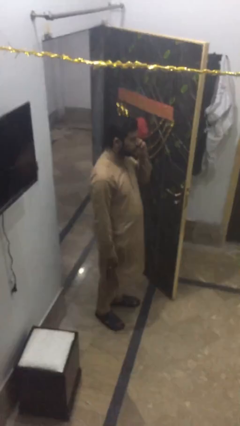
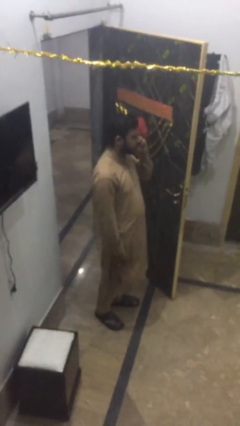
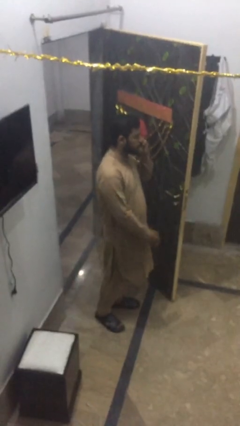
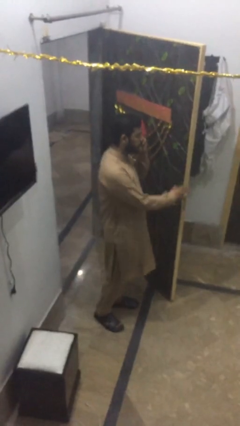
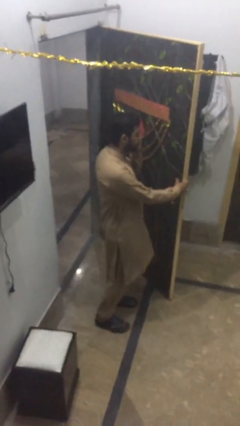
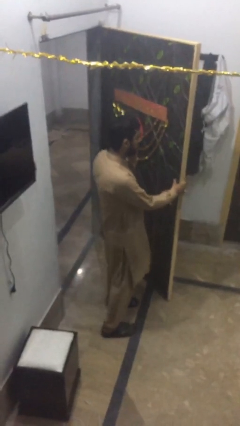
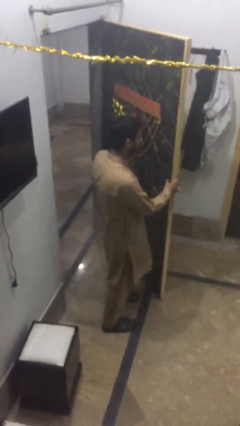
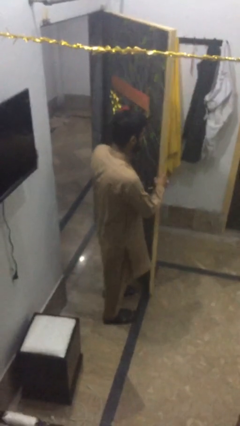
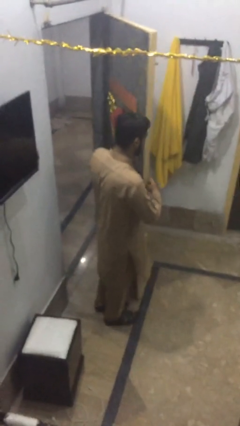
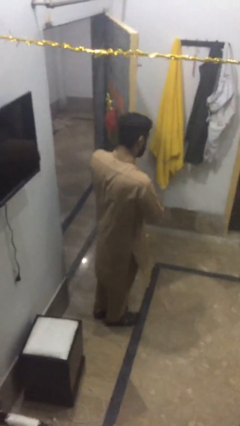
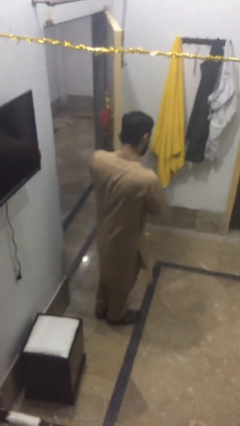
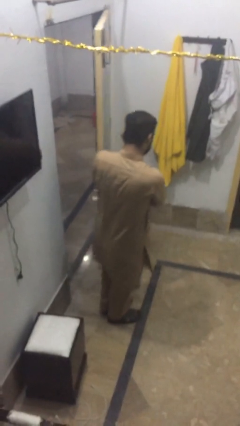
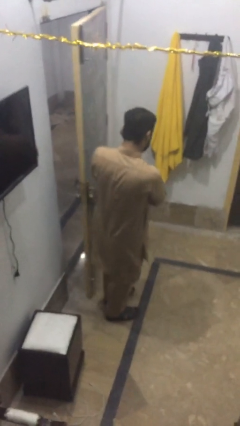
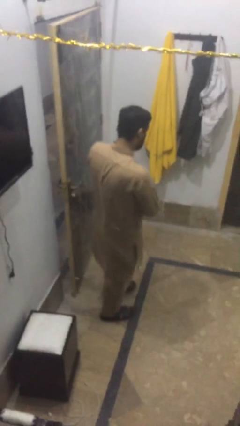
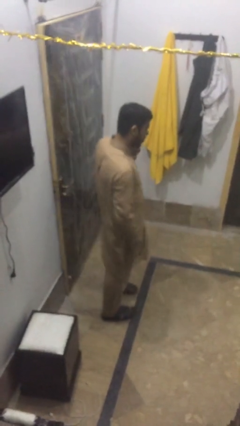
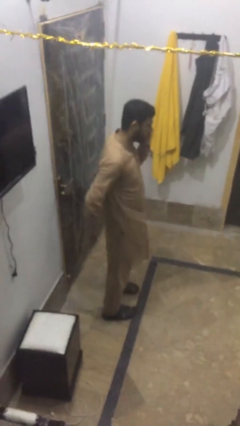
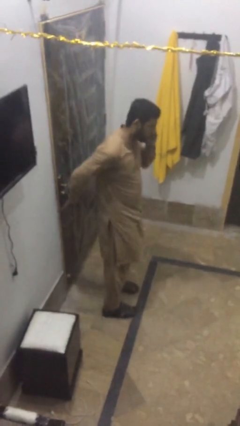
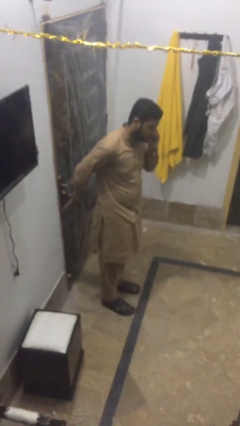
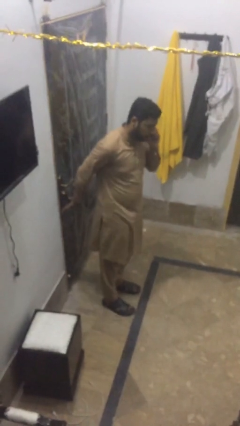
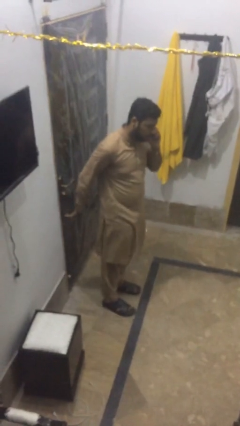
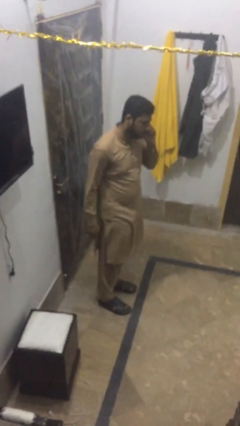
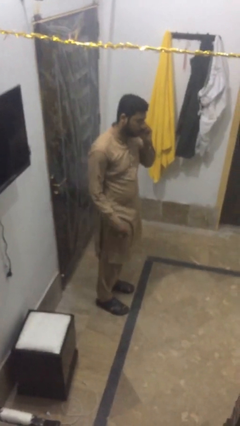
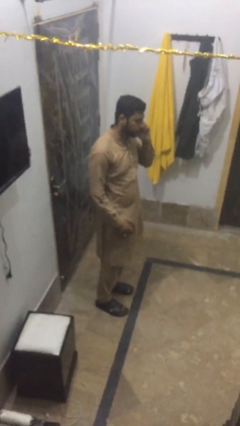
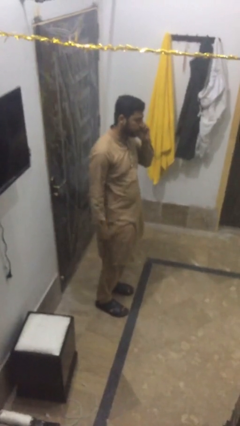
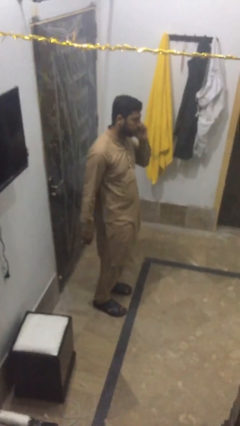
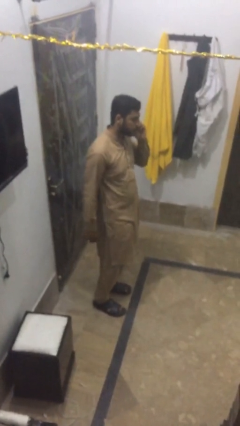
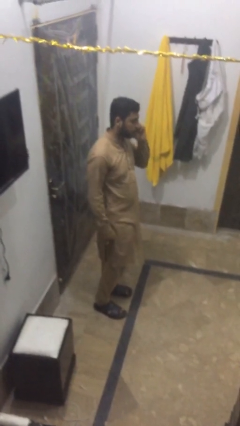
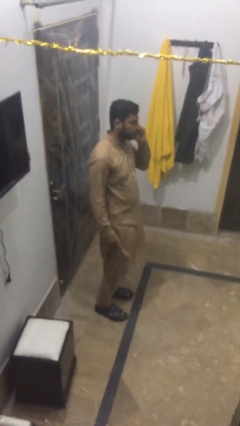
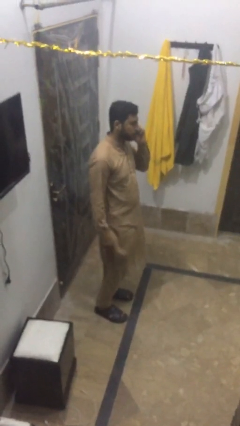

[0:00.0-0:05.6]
person closes facility door

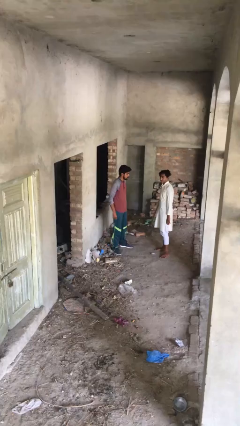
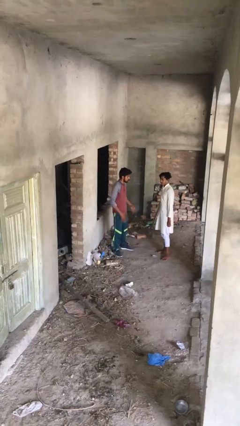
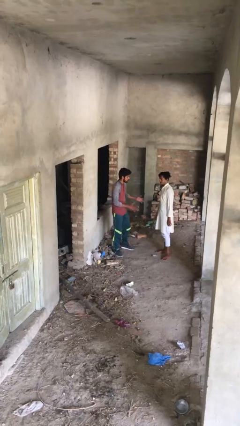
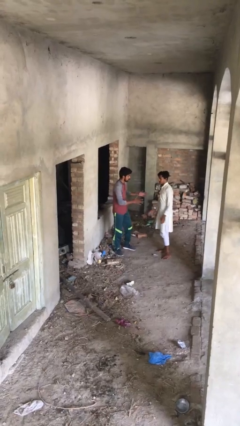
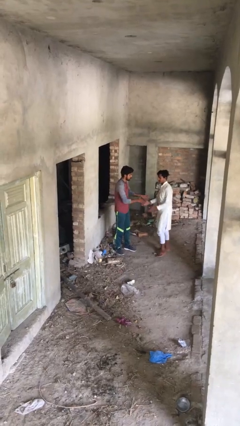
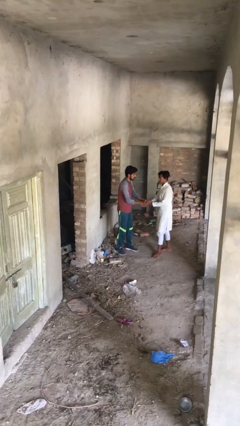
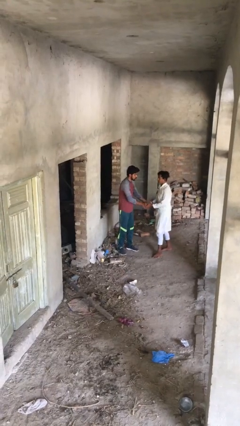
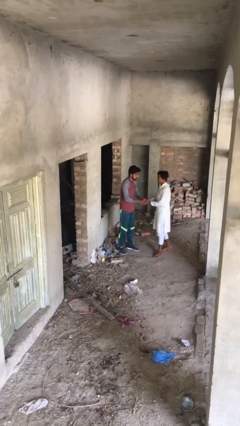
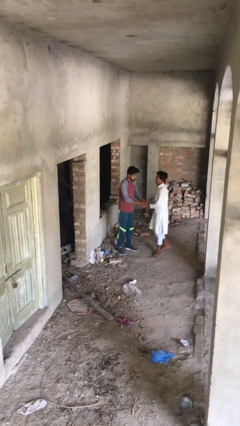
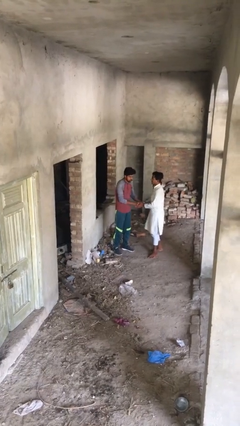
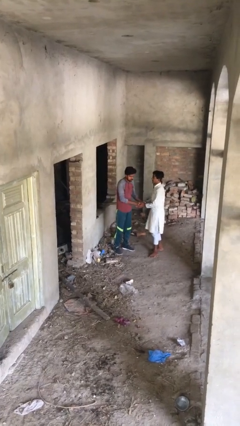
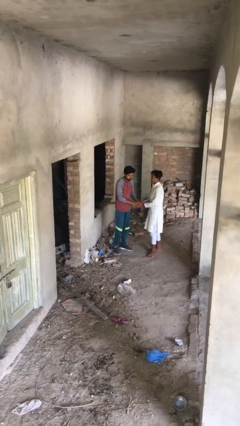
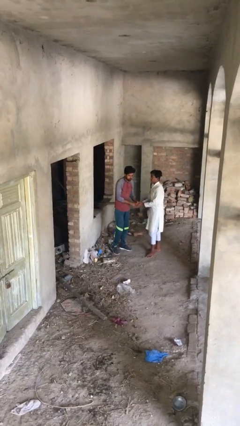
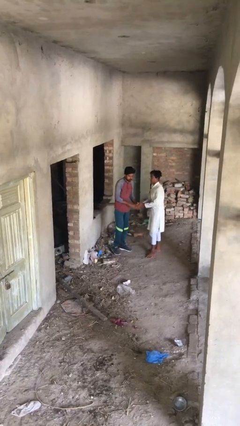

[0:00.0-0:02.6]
person shakes hand

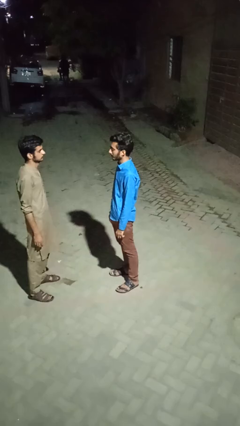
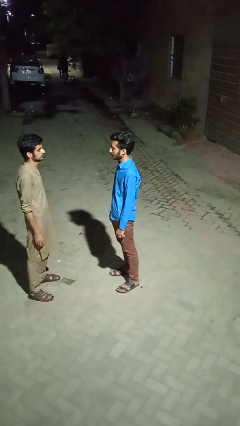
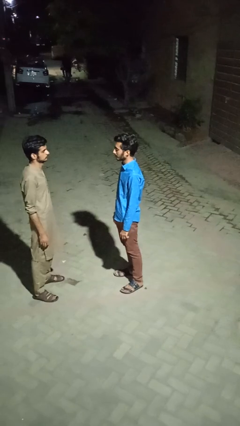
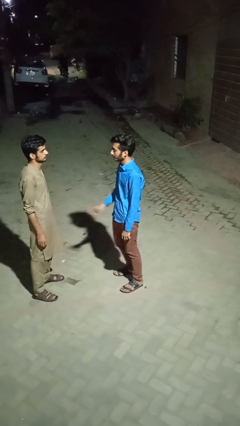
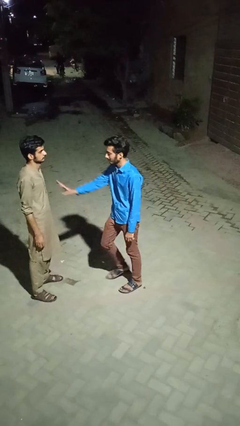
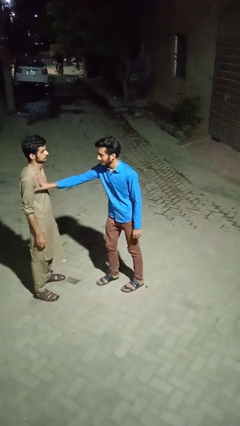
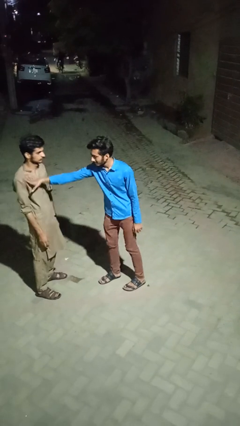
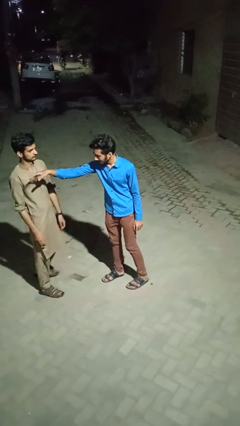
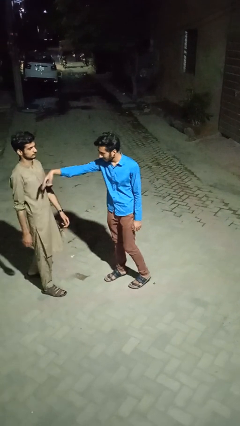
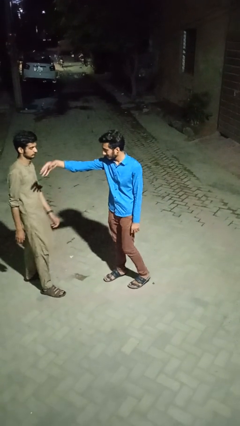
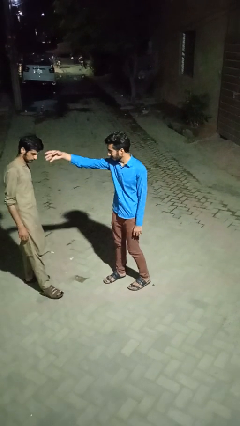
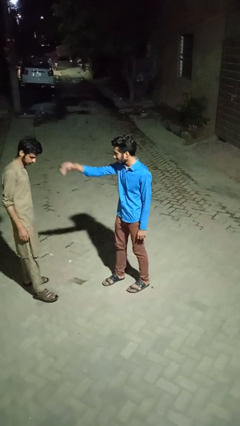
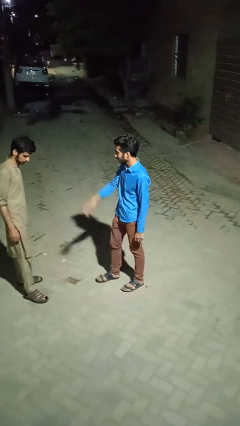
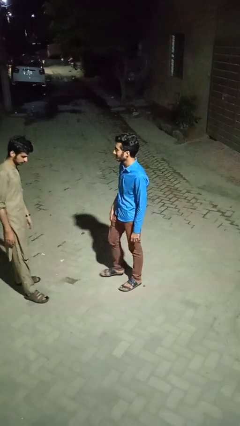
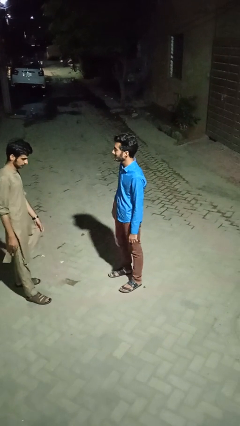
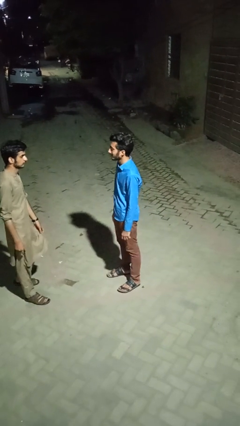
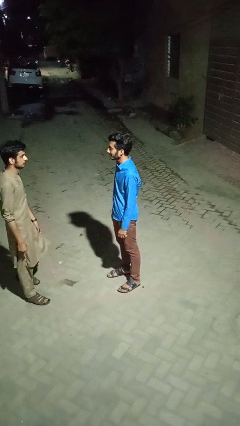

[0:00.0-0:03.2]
person shoves person

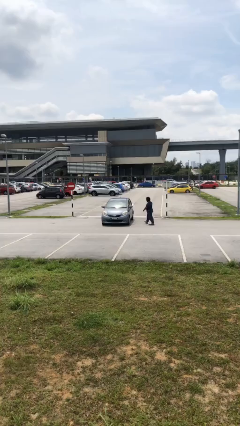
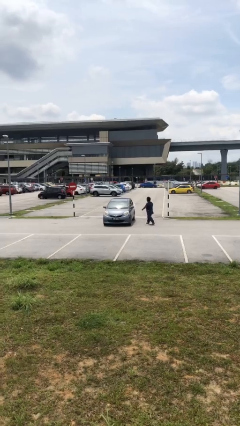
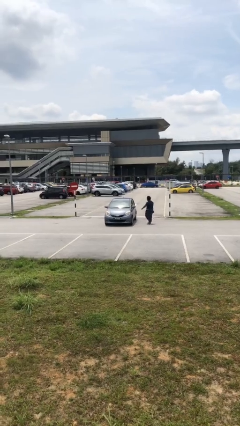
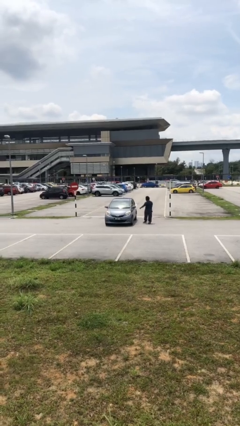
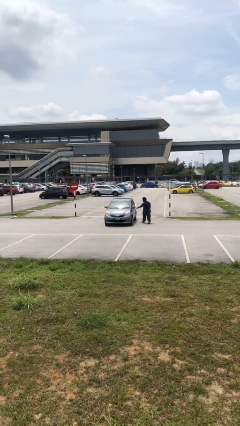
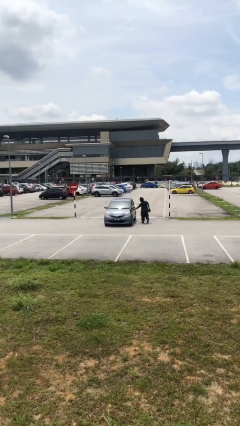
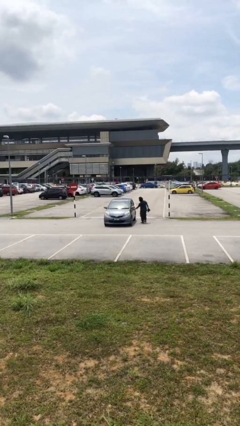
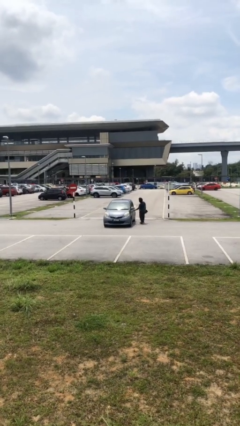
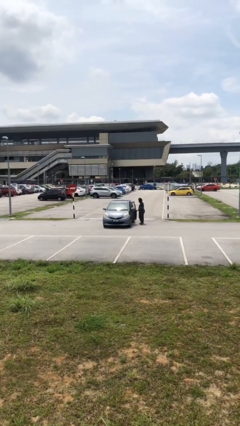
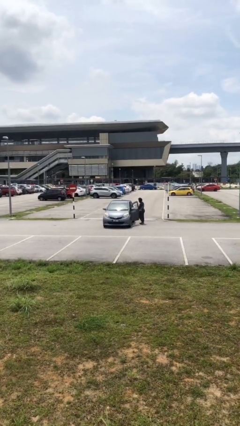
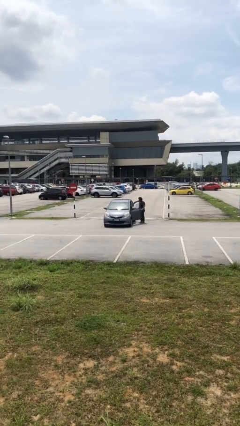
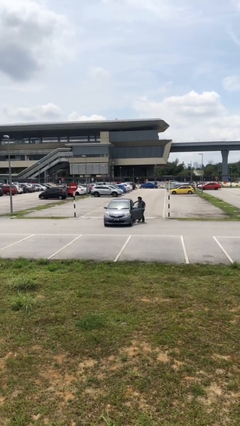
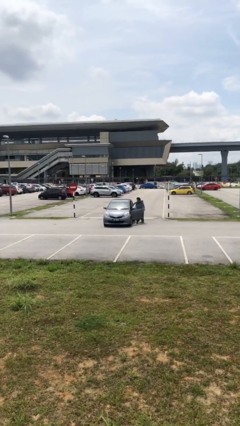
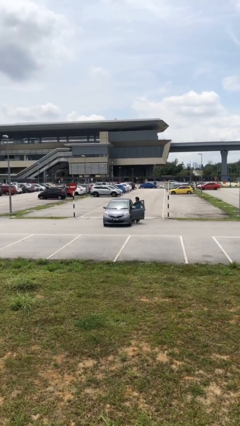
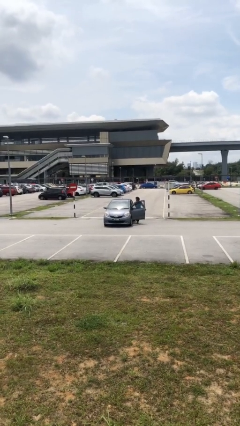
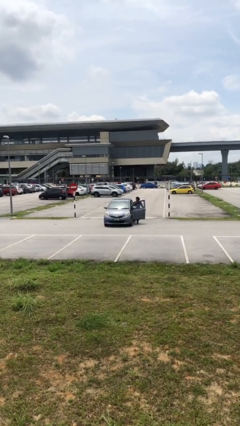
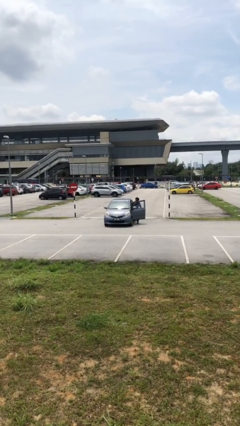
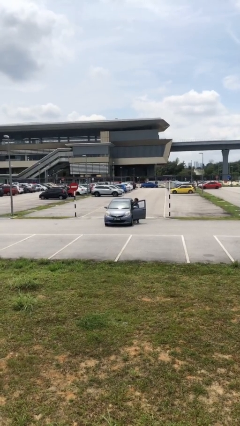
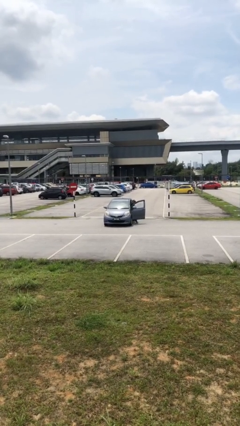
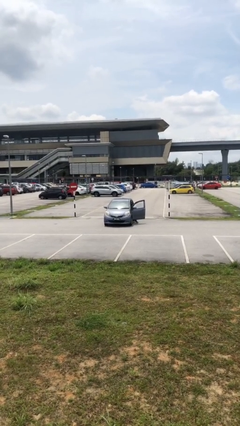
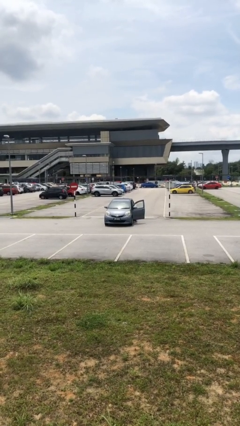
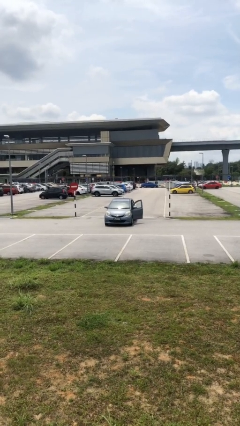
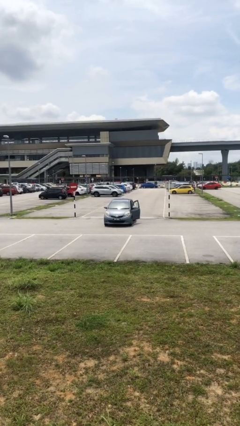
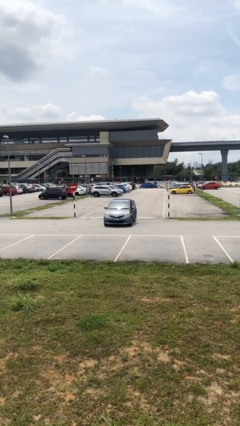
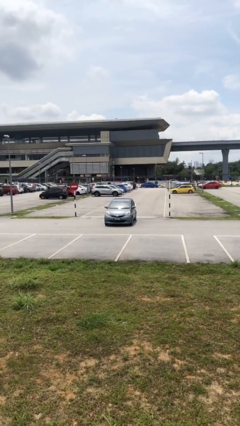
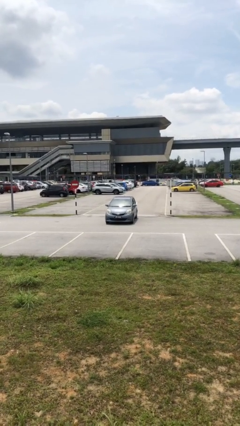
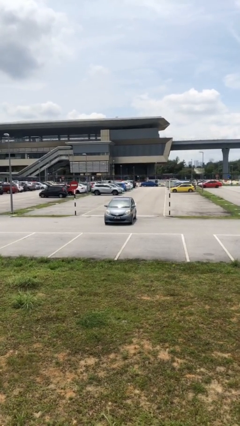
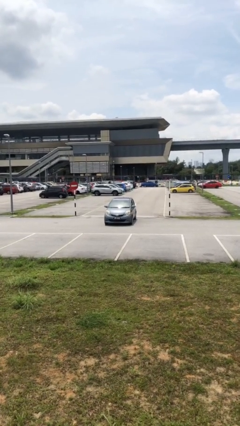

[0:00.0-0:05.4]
car picks up person

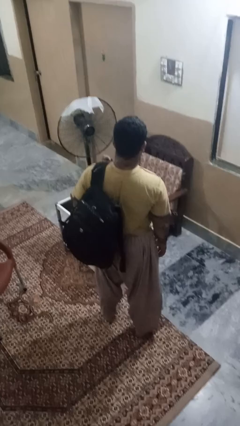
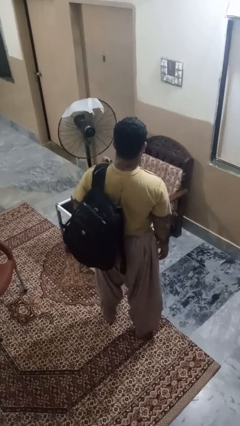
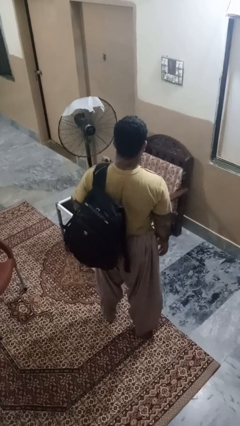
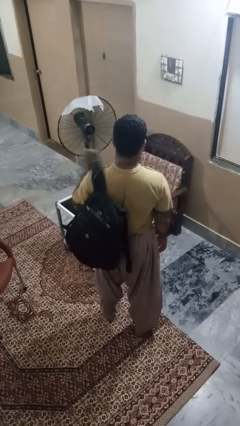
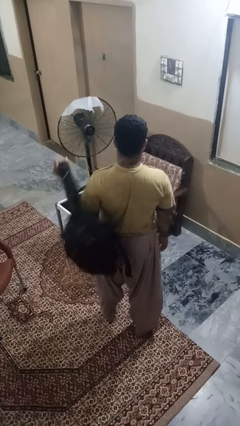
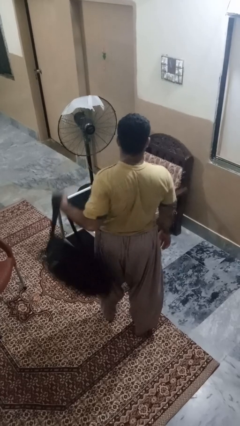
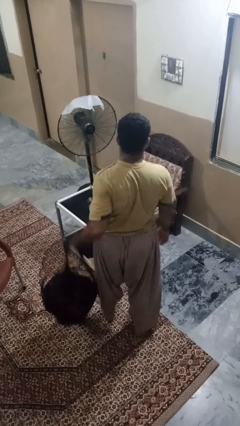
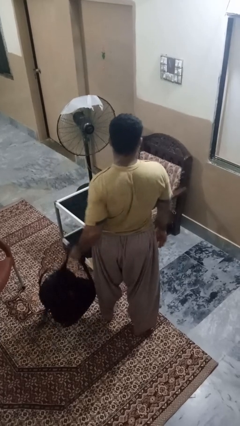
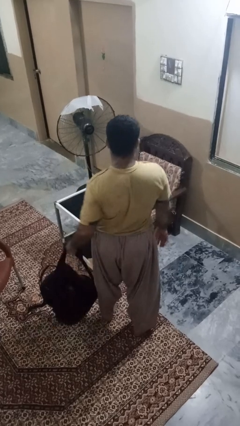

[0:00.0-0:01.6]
person takes off backpack
